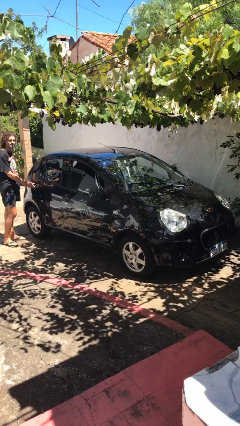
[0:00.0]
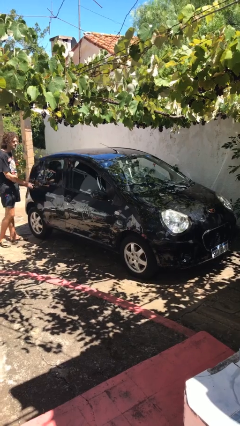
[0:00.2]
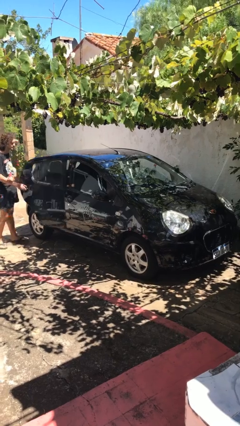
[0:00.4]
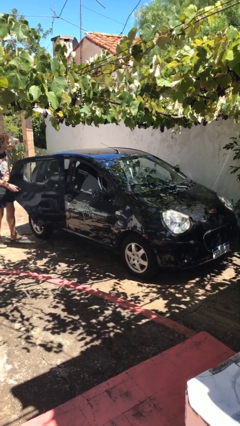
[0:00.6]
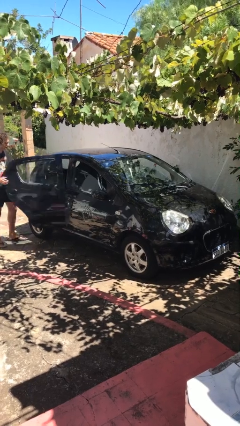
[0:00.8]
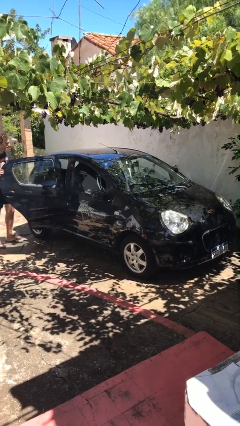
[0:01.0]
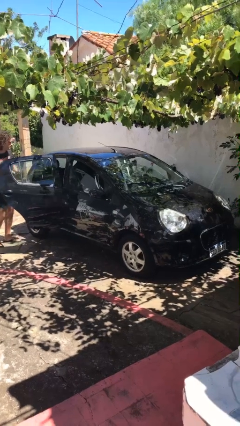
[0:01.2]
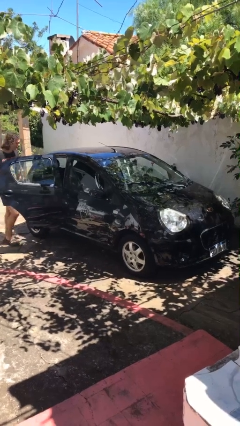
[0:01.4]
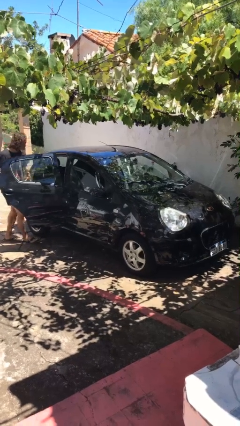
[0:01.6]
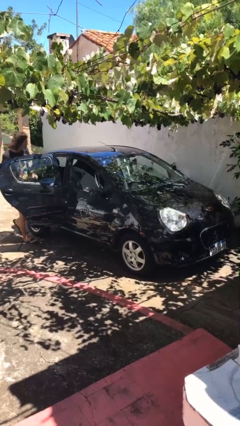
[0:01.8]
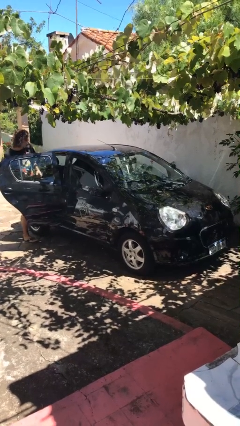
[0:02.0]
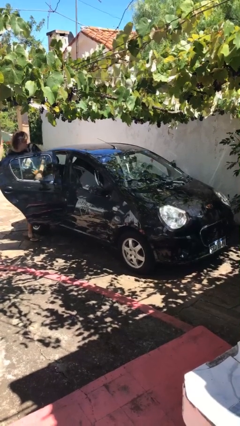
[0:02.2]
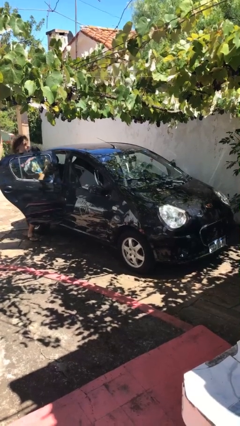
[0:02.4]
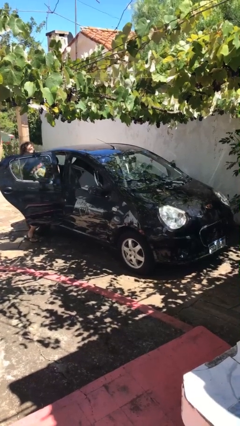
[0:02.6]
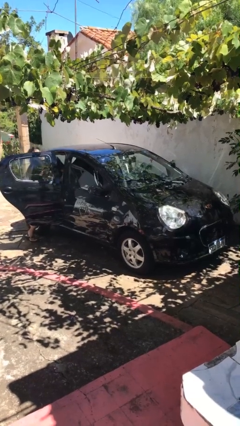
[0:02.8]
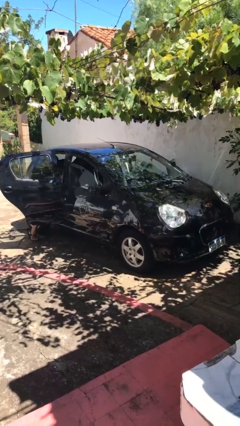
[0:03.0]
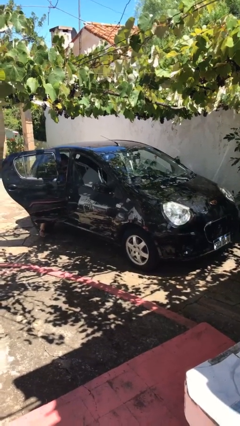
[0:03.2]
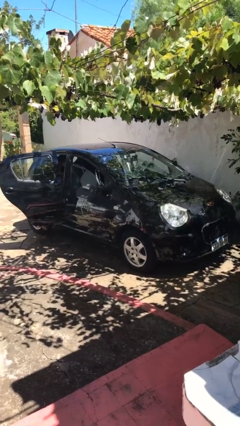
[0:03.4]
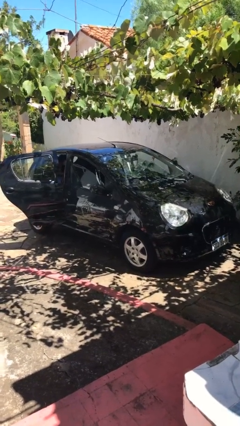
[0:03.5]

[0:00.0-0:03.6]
car picks up person

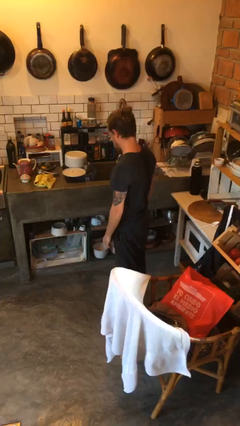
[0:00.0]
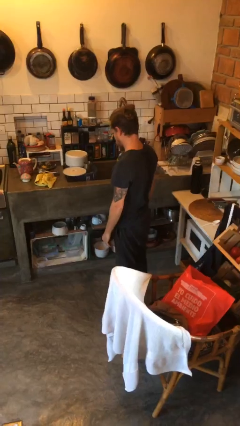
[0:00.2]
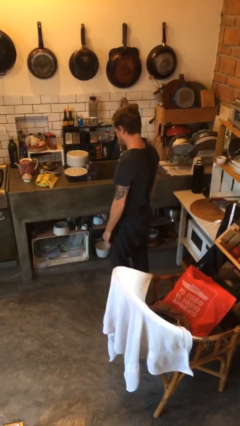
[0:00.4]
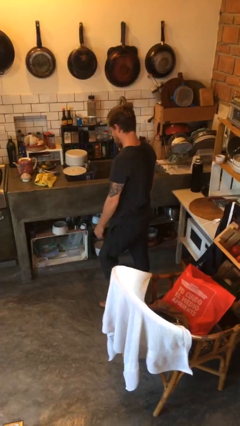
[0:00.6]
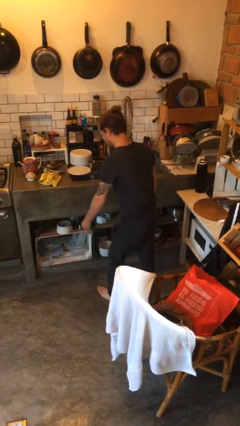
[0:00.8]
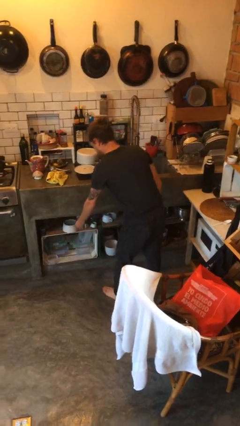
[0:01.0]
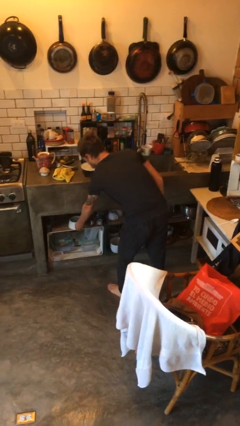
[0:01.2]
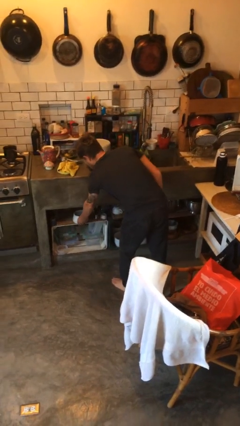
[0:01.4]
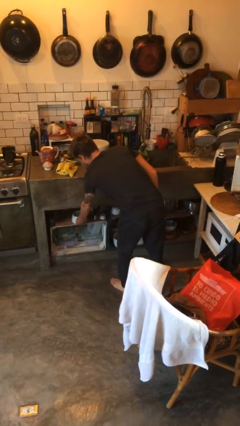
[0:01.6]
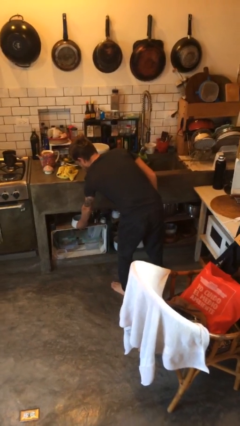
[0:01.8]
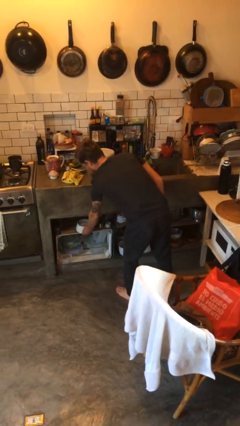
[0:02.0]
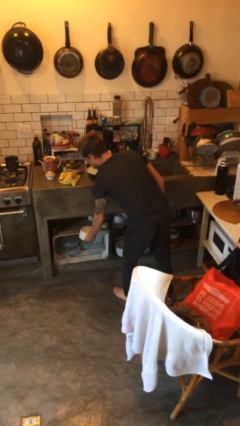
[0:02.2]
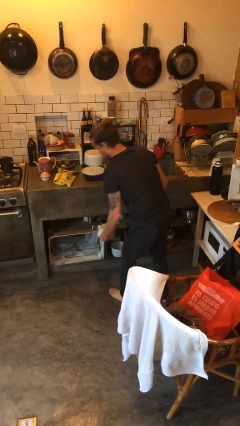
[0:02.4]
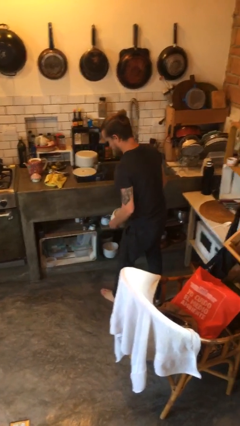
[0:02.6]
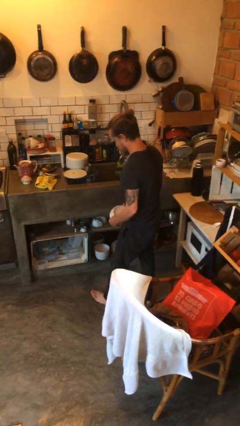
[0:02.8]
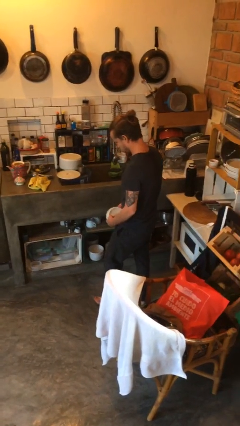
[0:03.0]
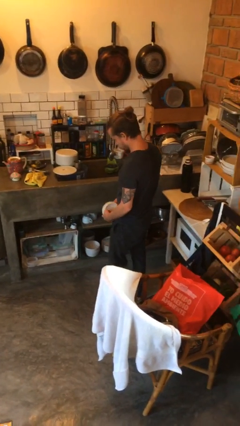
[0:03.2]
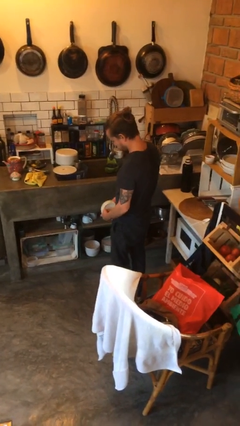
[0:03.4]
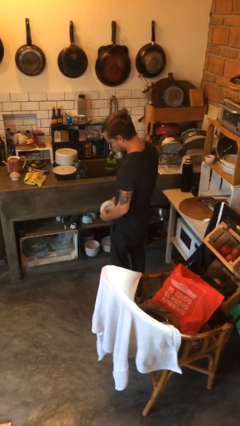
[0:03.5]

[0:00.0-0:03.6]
person picks up object from cabinet

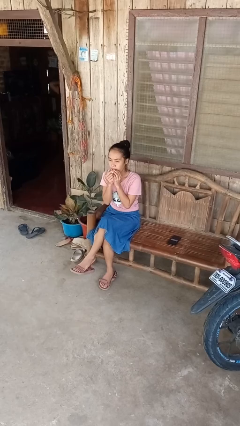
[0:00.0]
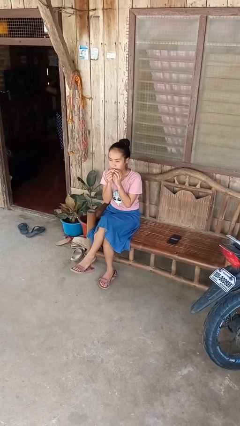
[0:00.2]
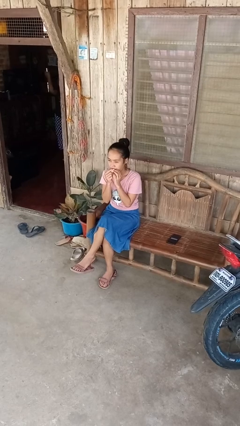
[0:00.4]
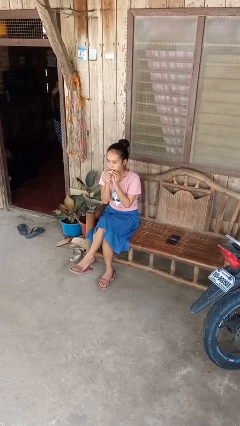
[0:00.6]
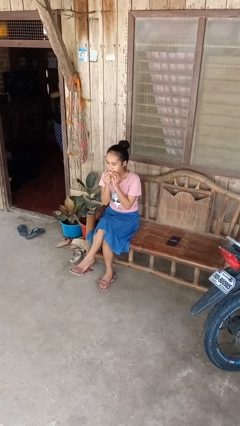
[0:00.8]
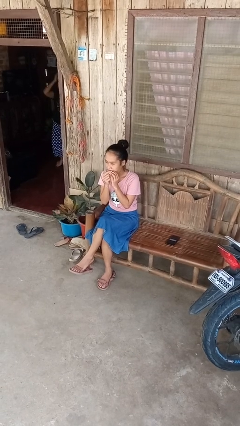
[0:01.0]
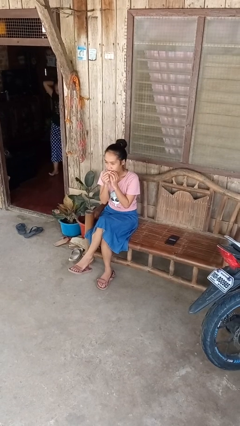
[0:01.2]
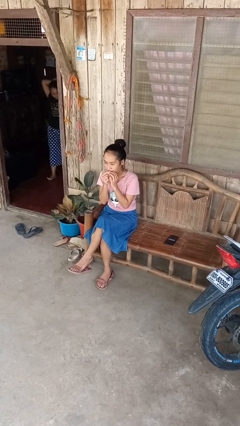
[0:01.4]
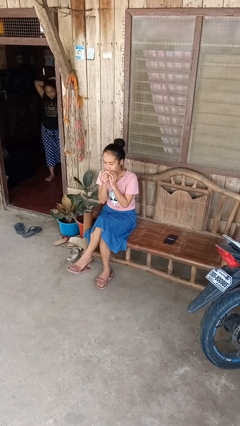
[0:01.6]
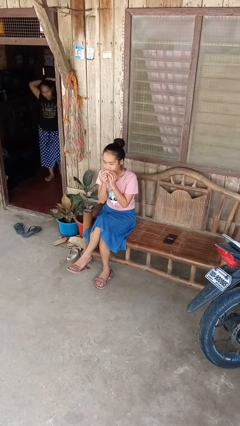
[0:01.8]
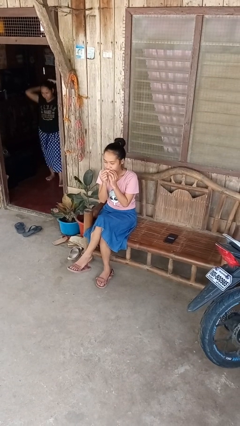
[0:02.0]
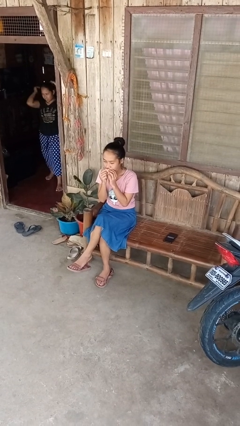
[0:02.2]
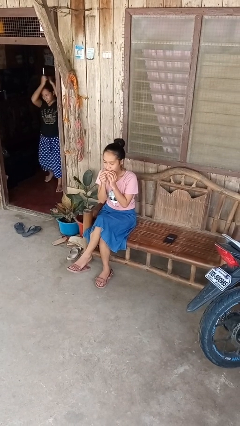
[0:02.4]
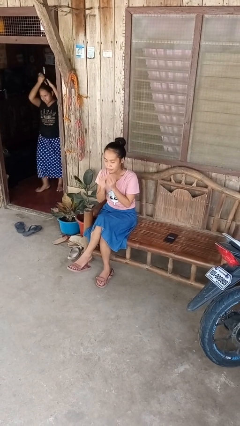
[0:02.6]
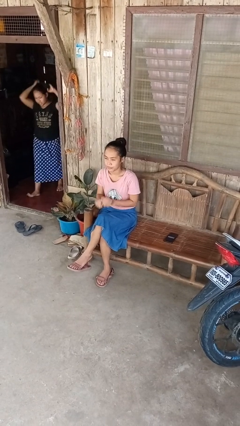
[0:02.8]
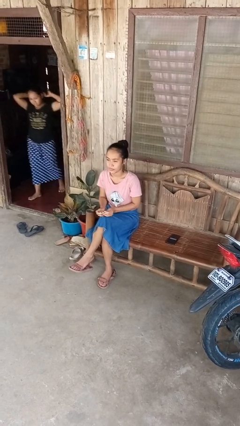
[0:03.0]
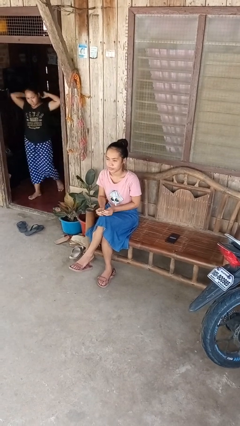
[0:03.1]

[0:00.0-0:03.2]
person flosses

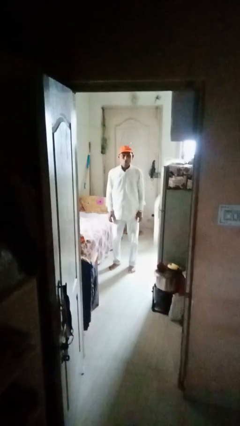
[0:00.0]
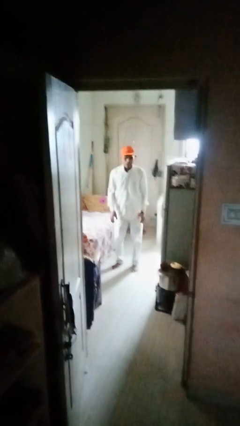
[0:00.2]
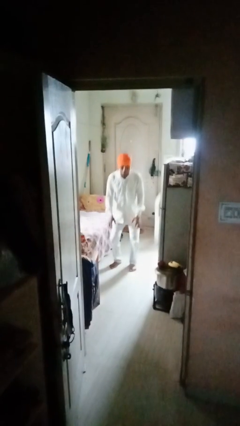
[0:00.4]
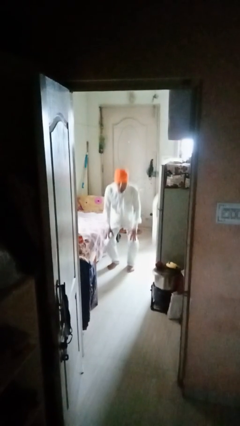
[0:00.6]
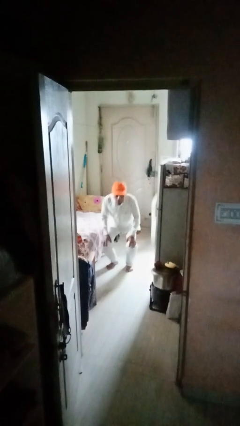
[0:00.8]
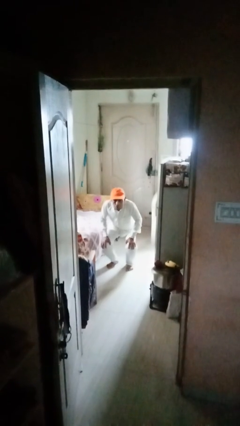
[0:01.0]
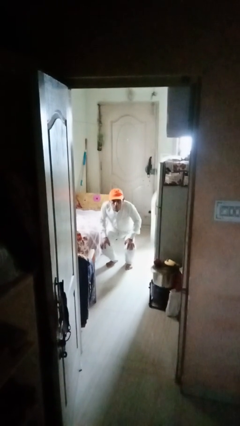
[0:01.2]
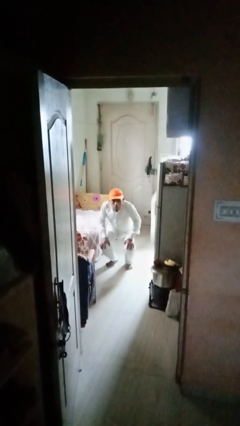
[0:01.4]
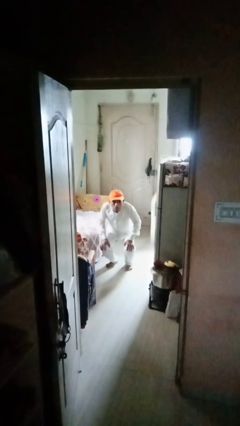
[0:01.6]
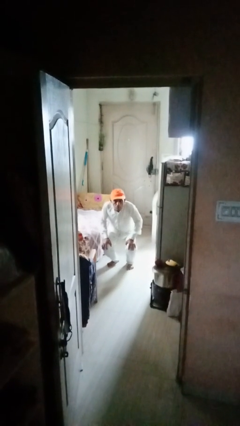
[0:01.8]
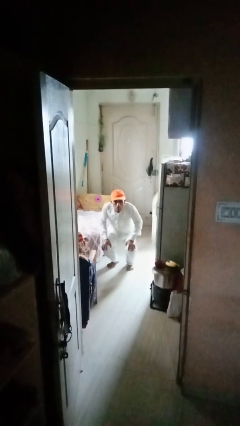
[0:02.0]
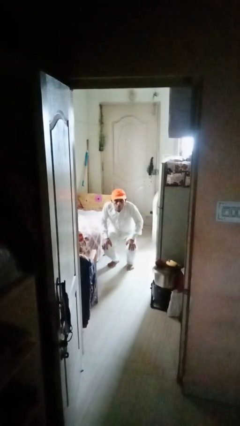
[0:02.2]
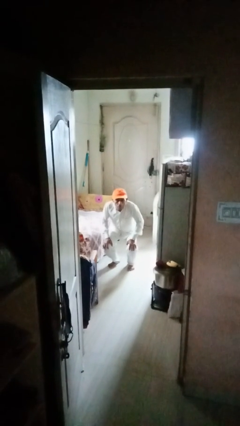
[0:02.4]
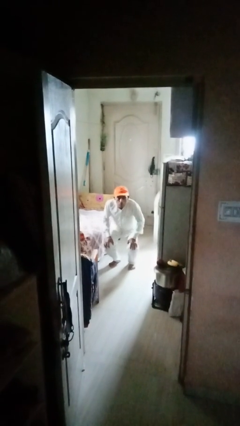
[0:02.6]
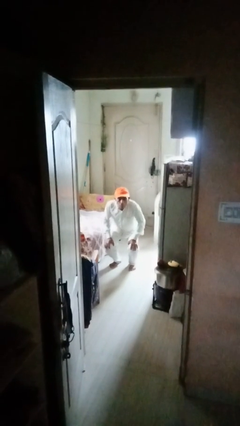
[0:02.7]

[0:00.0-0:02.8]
person squats

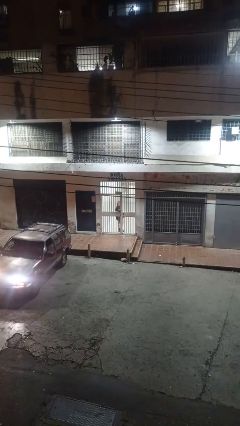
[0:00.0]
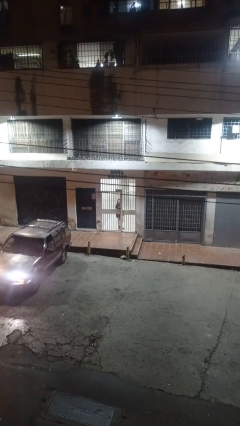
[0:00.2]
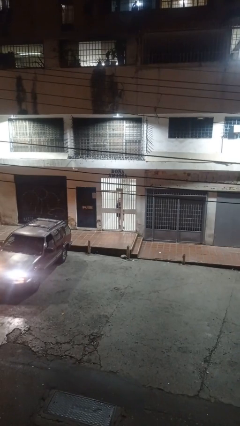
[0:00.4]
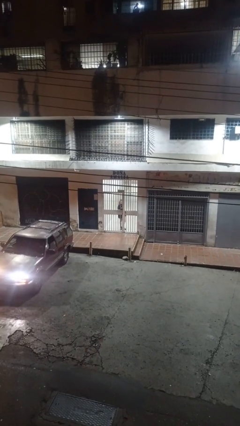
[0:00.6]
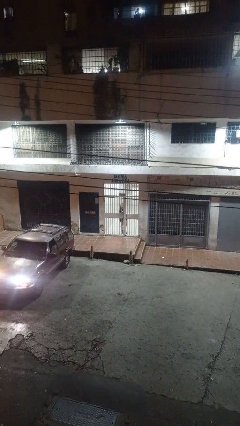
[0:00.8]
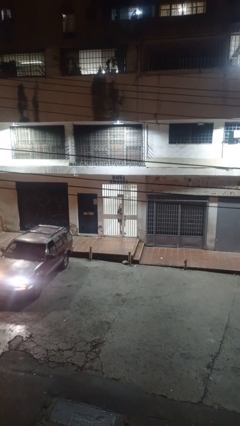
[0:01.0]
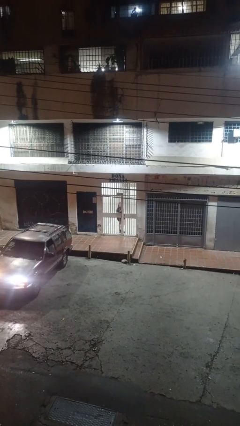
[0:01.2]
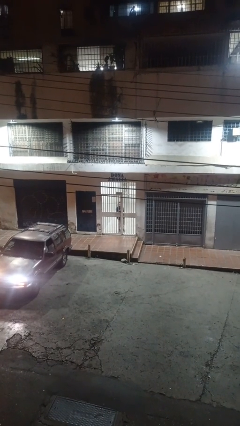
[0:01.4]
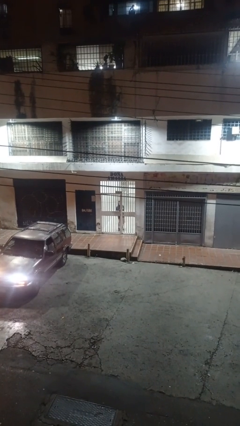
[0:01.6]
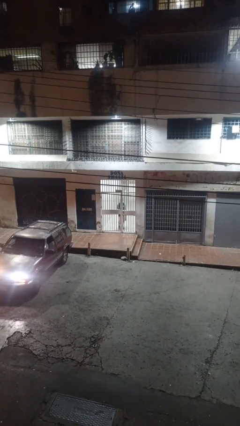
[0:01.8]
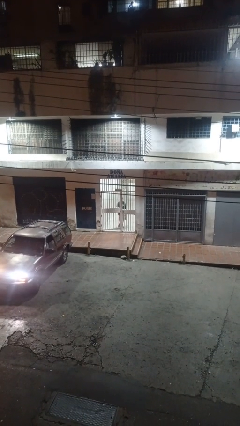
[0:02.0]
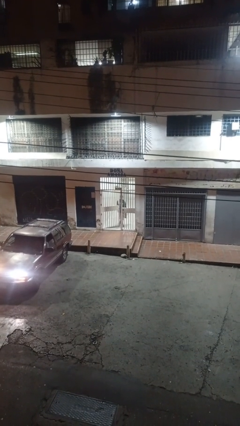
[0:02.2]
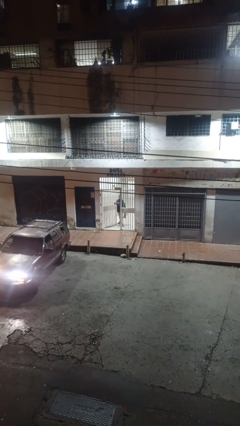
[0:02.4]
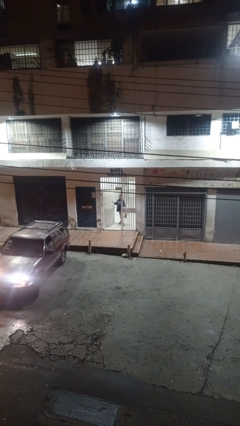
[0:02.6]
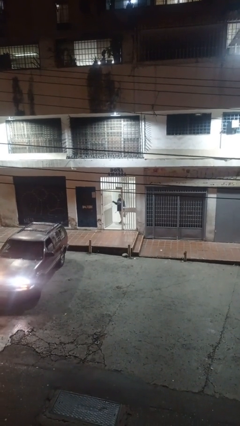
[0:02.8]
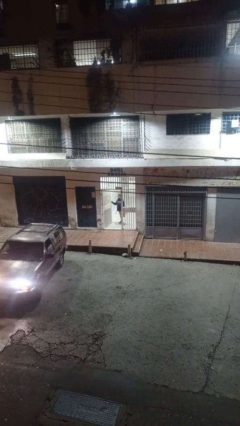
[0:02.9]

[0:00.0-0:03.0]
person opens gate

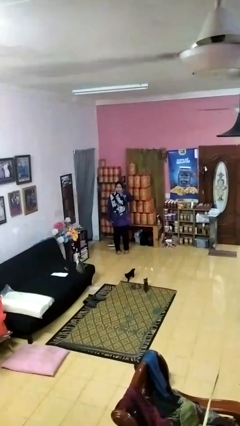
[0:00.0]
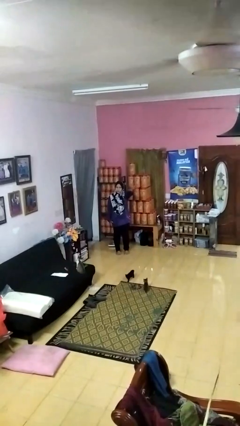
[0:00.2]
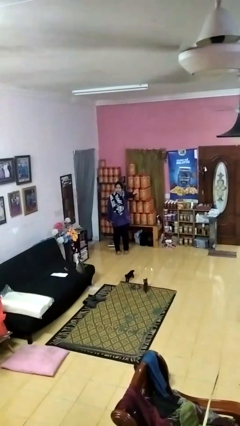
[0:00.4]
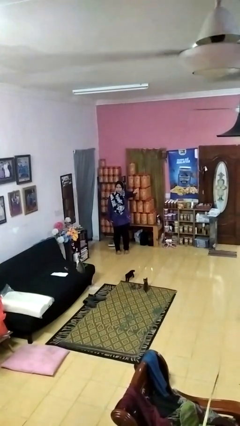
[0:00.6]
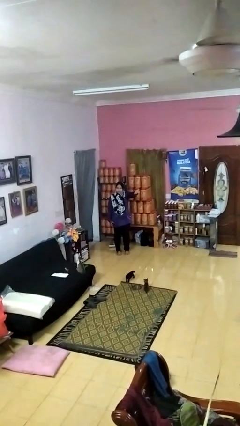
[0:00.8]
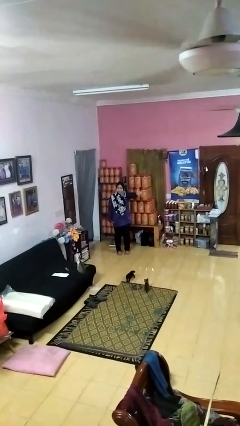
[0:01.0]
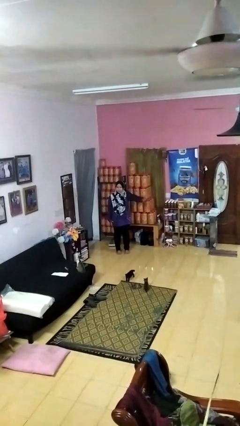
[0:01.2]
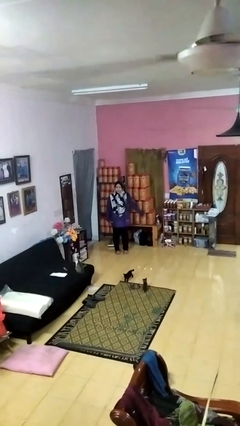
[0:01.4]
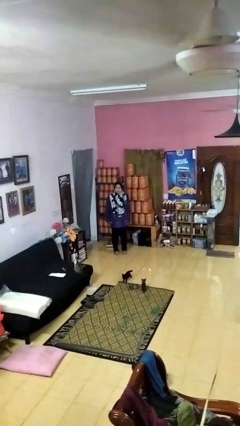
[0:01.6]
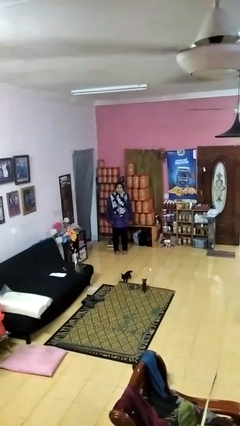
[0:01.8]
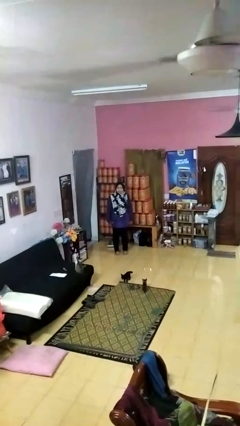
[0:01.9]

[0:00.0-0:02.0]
person gestures blow kiss
